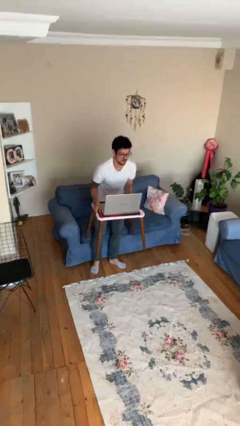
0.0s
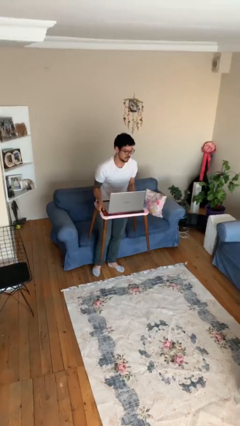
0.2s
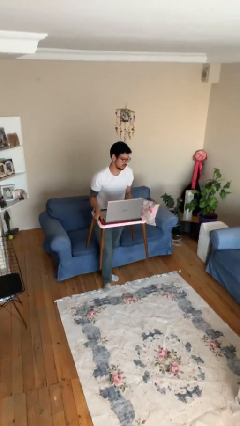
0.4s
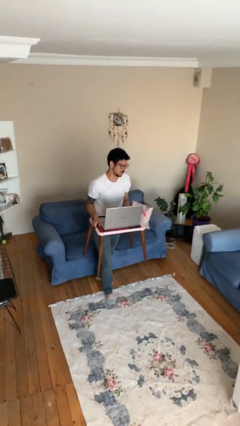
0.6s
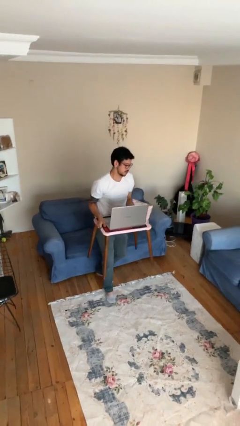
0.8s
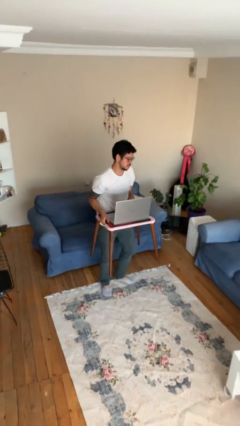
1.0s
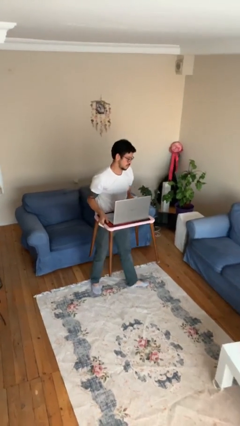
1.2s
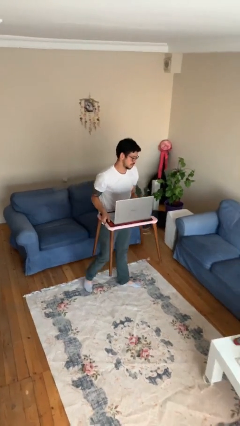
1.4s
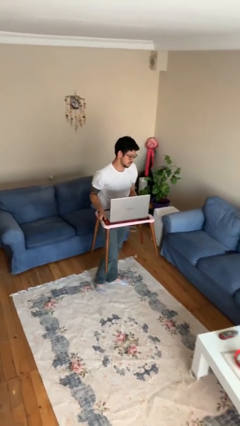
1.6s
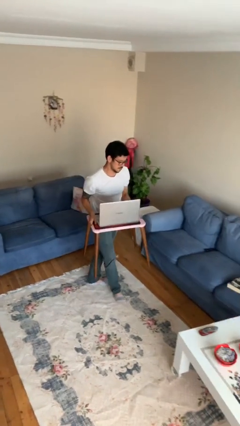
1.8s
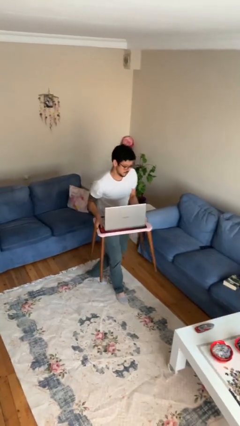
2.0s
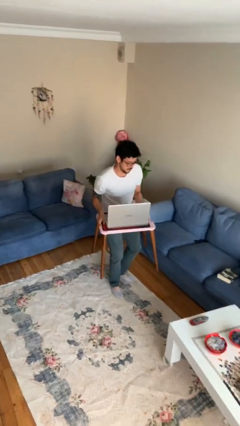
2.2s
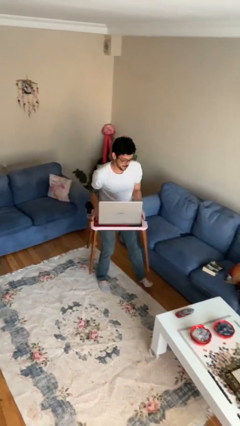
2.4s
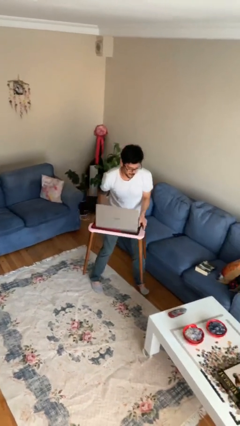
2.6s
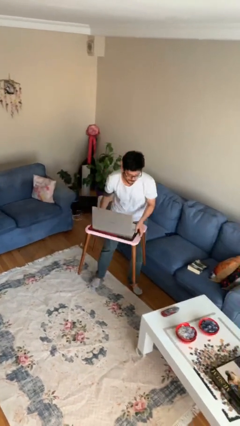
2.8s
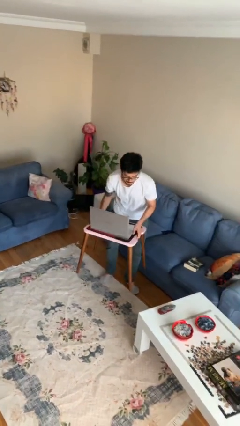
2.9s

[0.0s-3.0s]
person carries heavy object

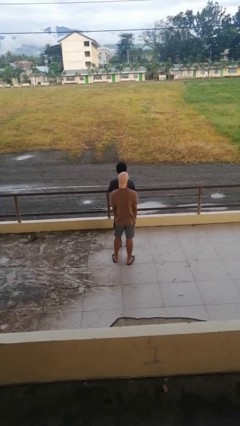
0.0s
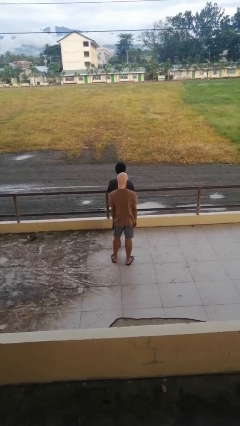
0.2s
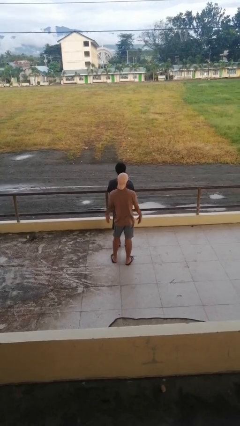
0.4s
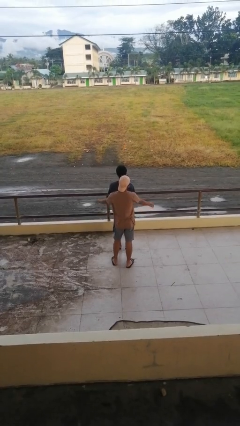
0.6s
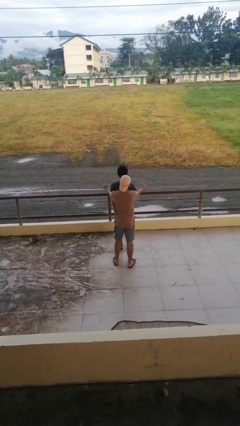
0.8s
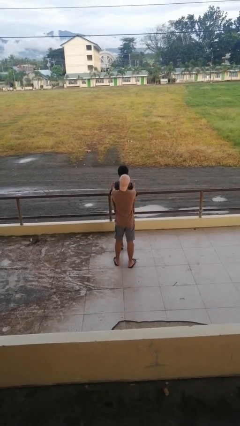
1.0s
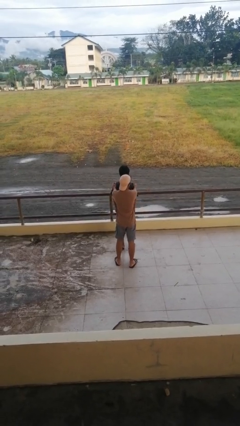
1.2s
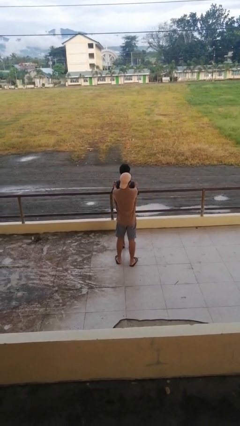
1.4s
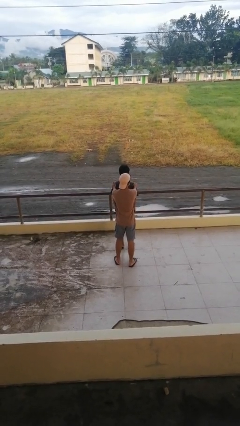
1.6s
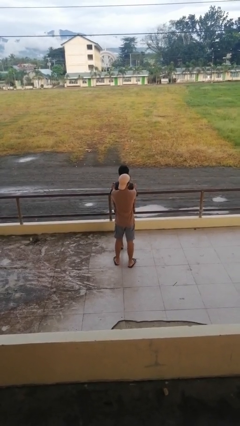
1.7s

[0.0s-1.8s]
person pounds shoulders of person

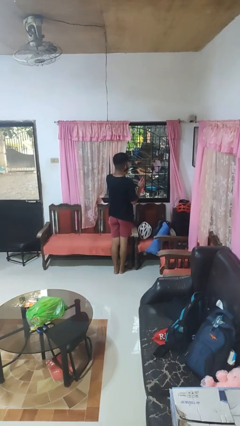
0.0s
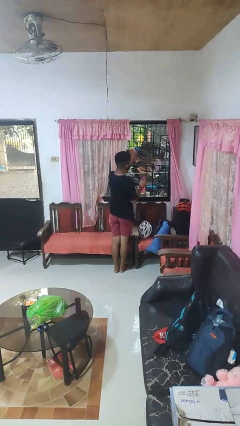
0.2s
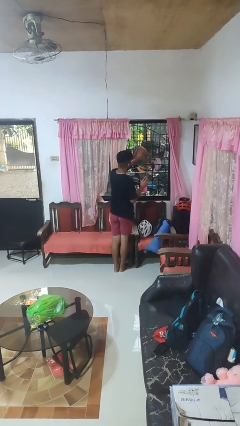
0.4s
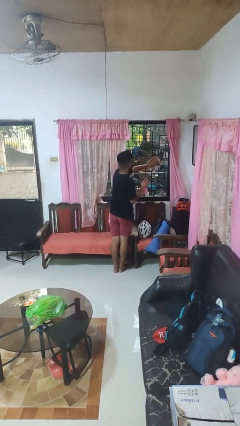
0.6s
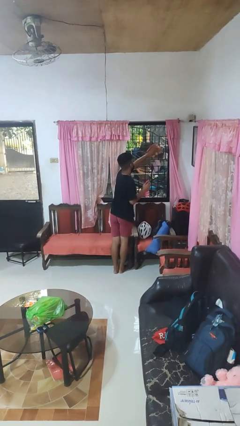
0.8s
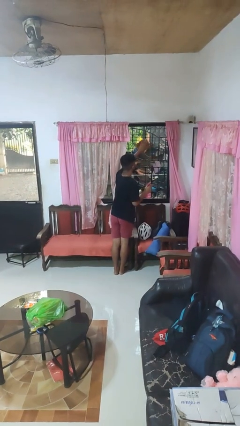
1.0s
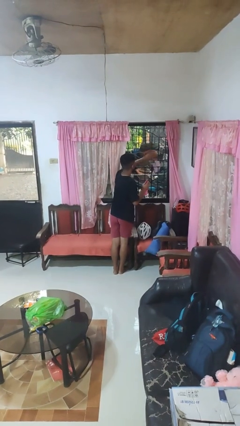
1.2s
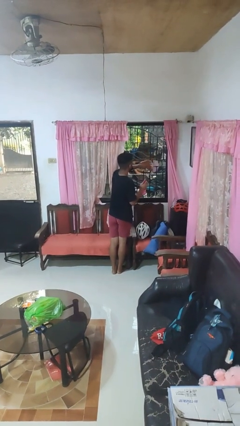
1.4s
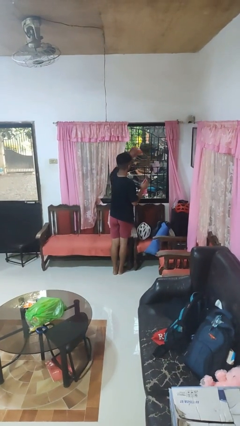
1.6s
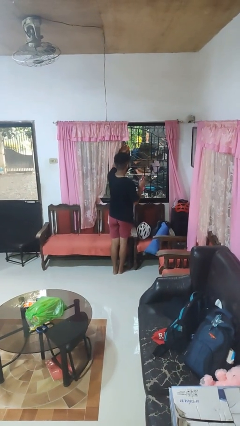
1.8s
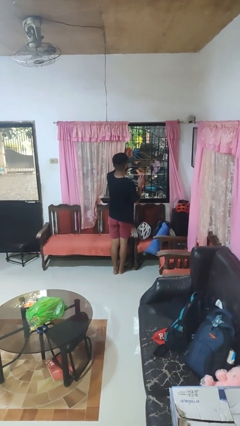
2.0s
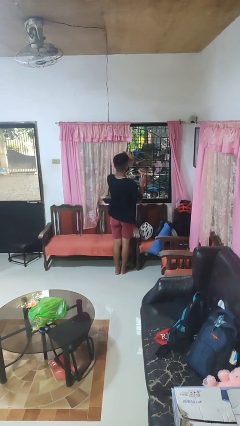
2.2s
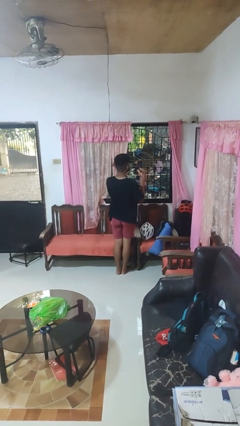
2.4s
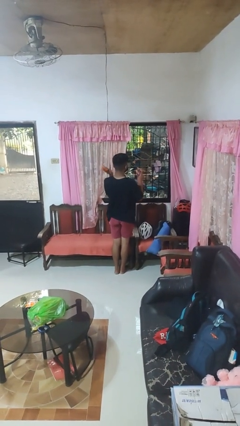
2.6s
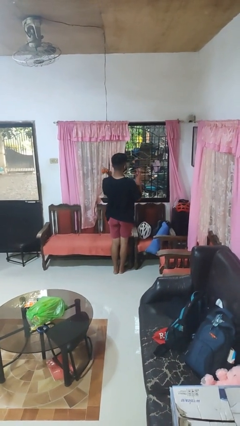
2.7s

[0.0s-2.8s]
person washes window

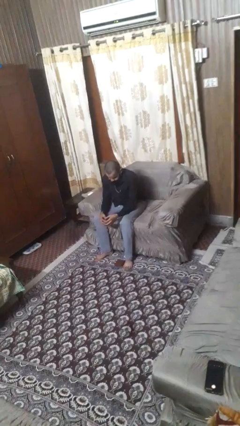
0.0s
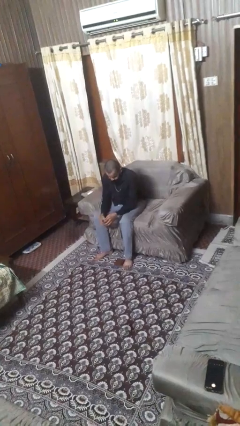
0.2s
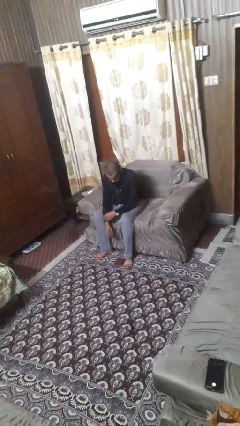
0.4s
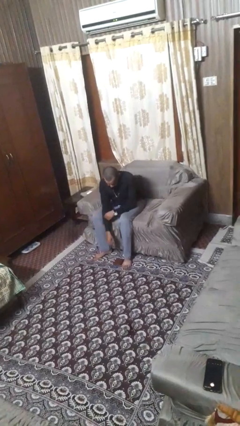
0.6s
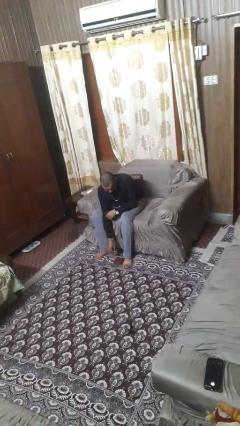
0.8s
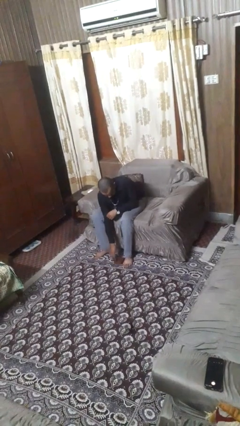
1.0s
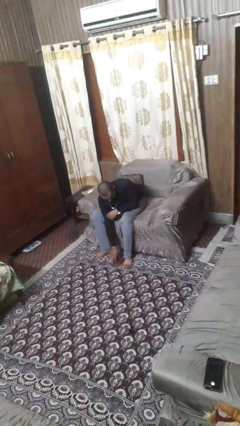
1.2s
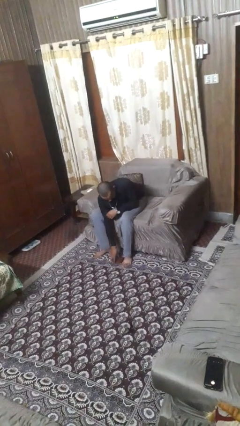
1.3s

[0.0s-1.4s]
person drops object

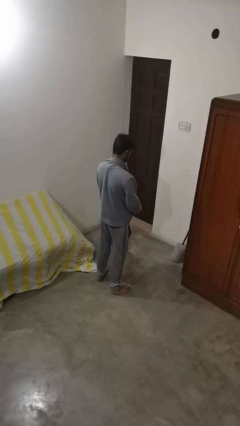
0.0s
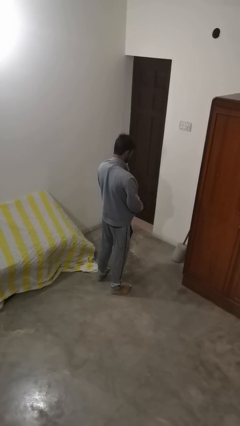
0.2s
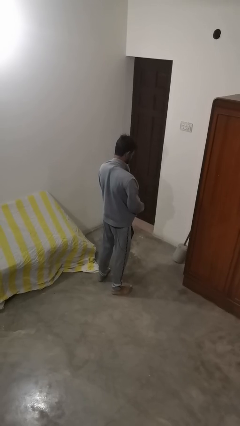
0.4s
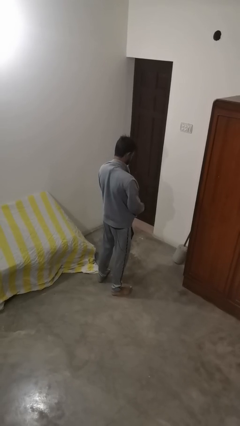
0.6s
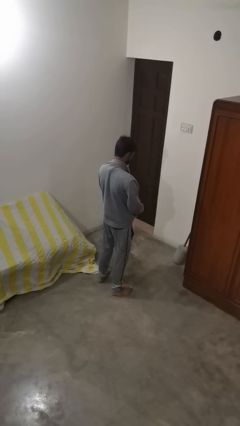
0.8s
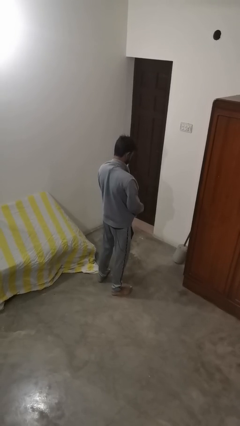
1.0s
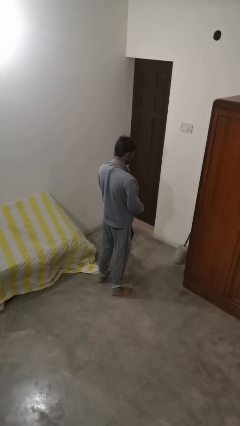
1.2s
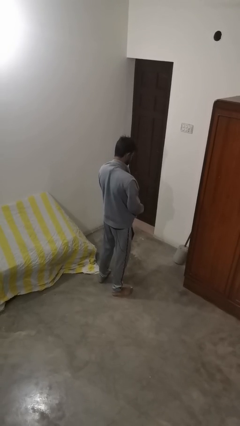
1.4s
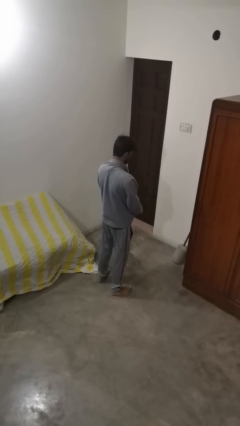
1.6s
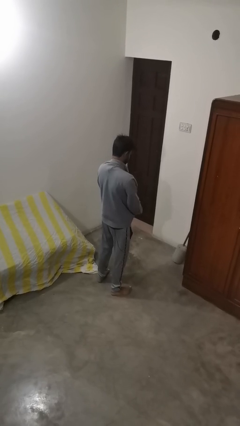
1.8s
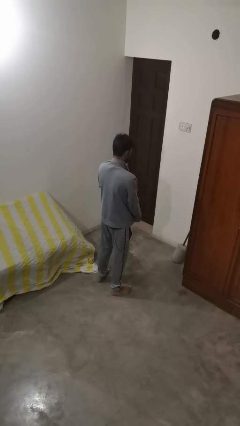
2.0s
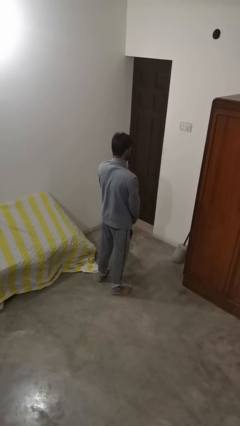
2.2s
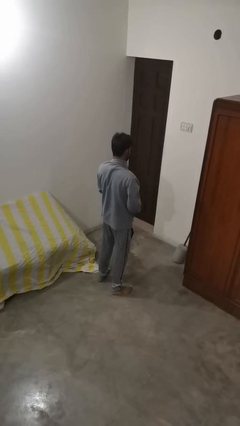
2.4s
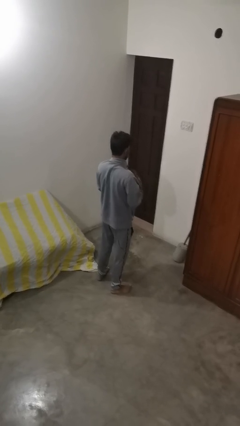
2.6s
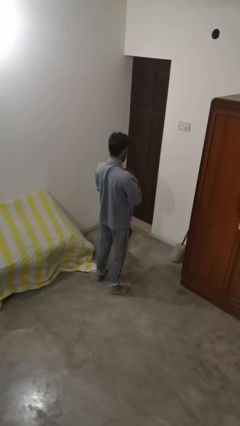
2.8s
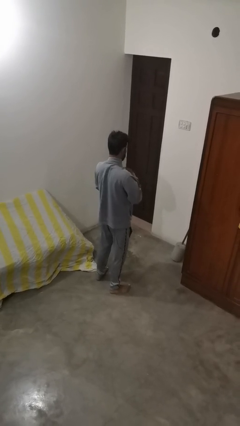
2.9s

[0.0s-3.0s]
person zips up jacket

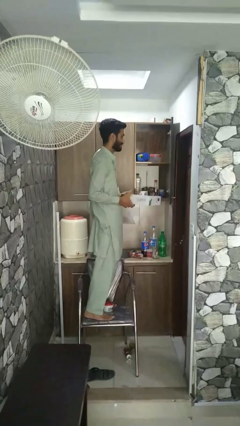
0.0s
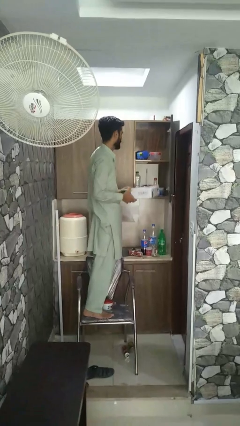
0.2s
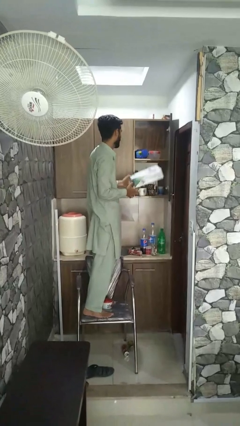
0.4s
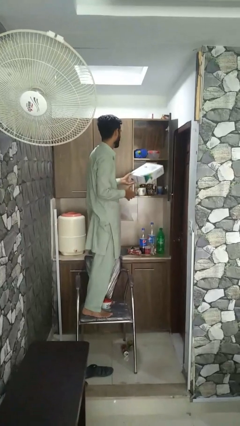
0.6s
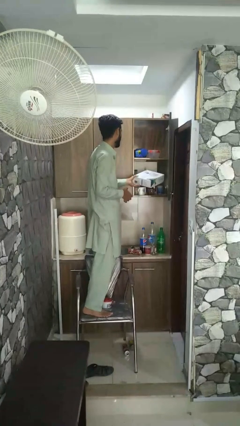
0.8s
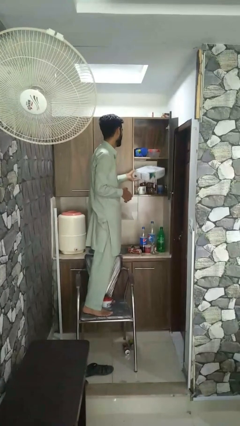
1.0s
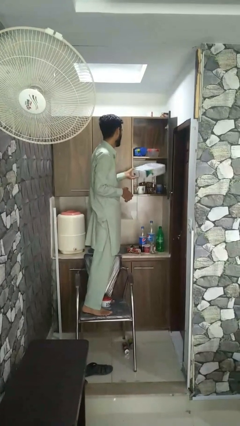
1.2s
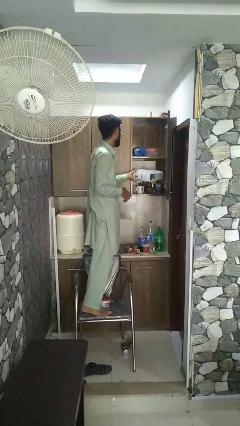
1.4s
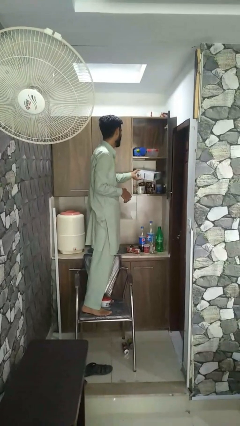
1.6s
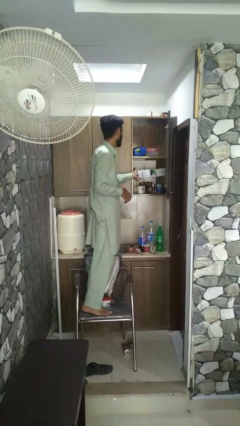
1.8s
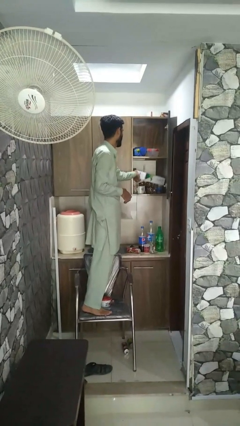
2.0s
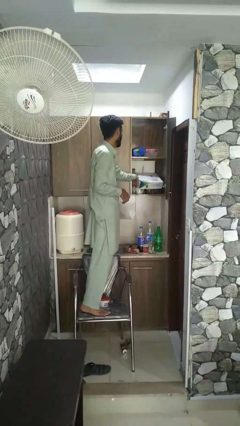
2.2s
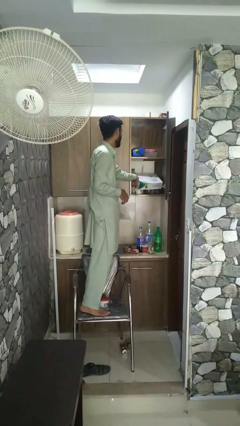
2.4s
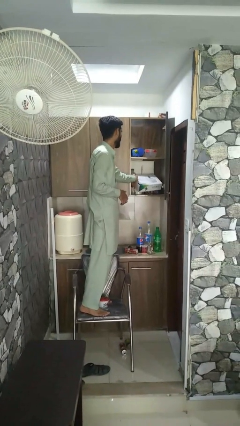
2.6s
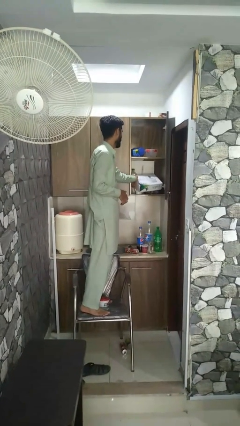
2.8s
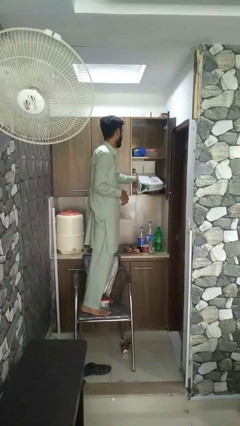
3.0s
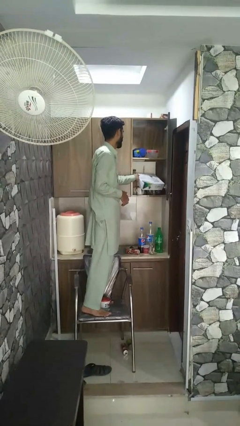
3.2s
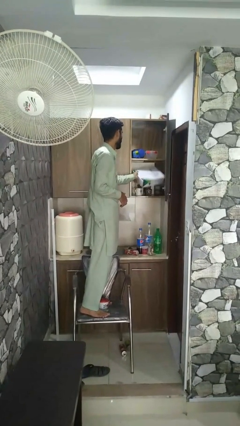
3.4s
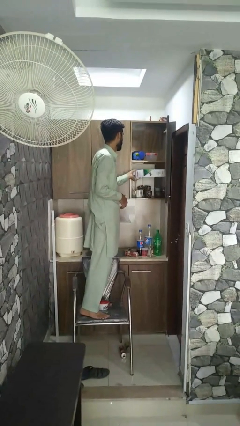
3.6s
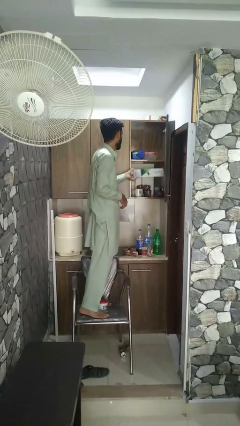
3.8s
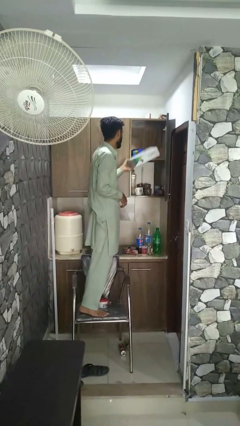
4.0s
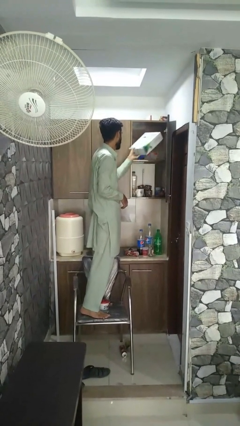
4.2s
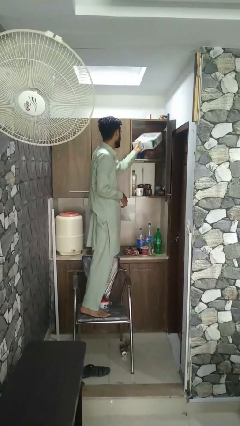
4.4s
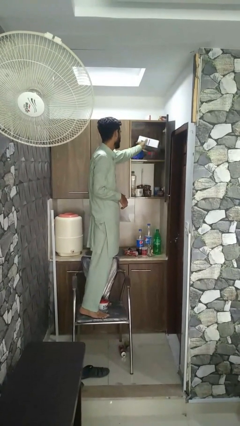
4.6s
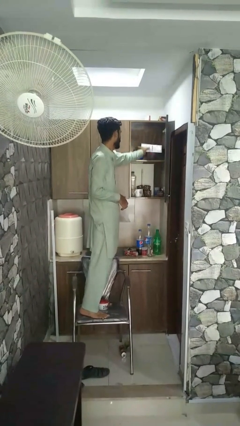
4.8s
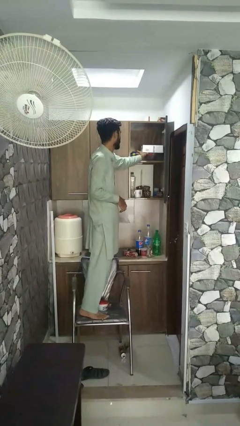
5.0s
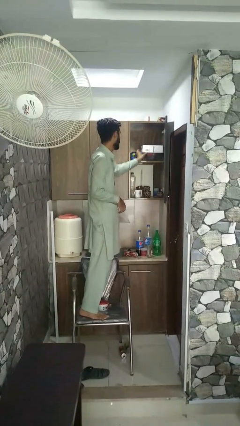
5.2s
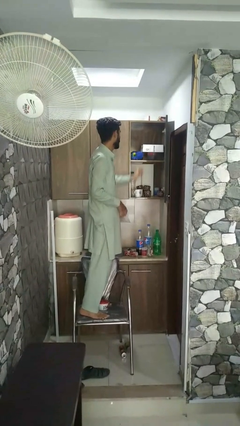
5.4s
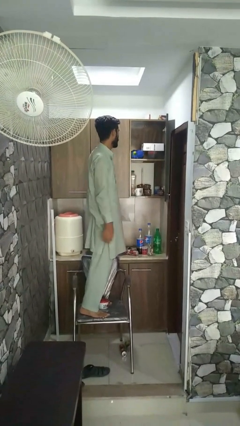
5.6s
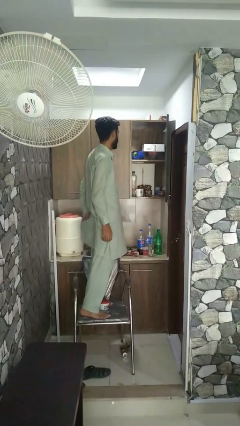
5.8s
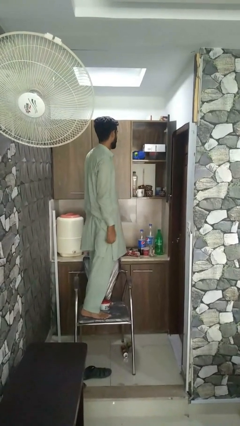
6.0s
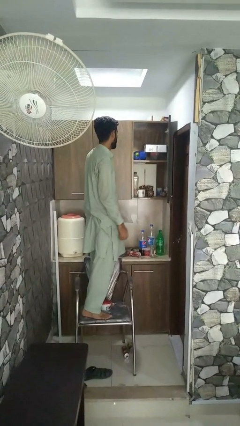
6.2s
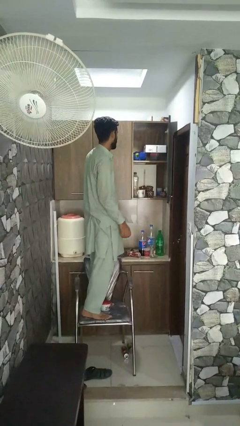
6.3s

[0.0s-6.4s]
person puts down object on shelf
